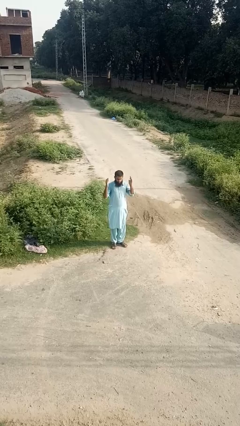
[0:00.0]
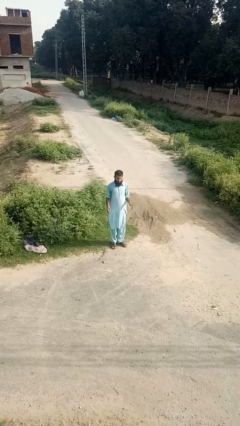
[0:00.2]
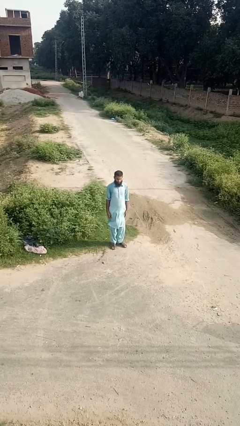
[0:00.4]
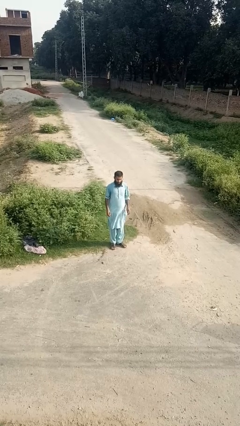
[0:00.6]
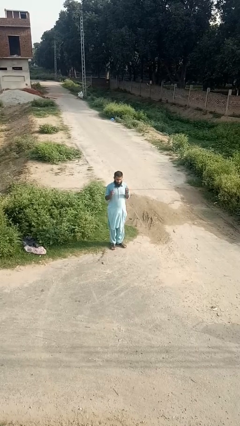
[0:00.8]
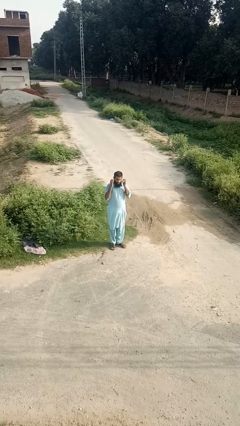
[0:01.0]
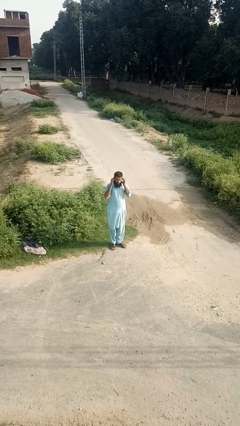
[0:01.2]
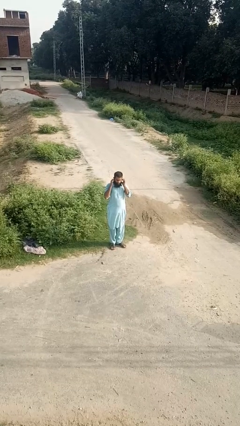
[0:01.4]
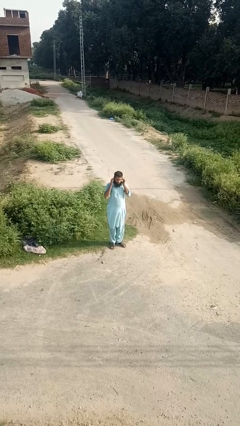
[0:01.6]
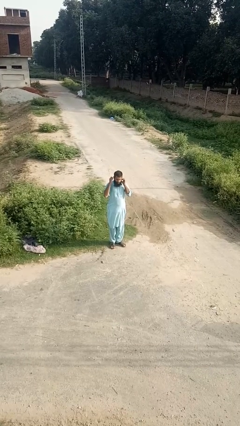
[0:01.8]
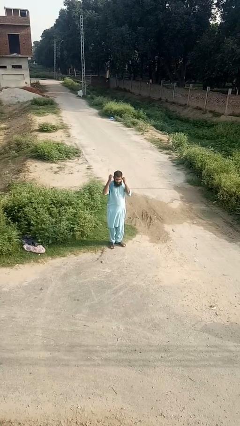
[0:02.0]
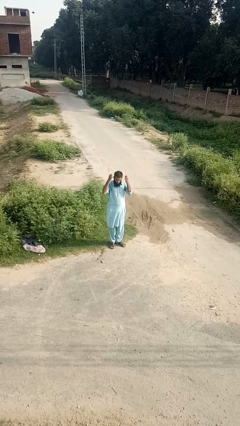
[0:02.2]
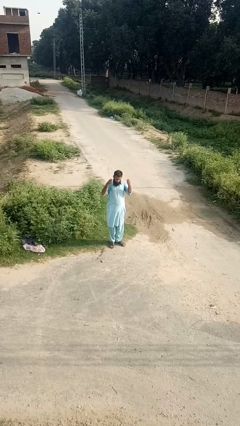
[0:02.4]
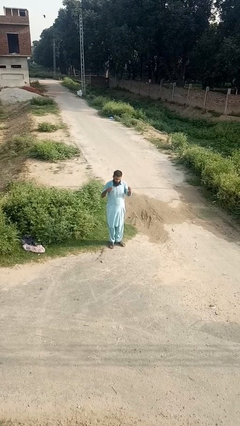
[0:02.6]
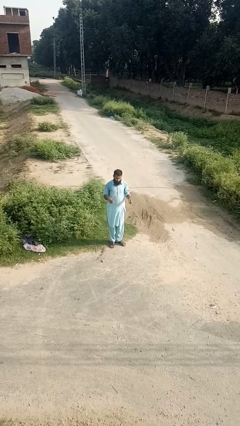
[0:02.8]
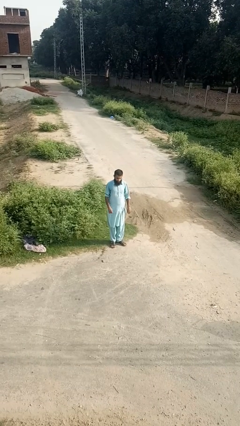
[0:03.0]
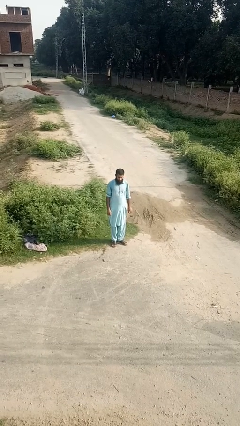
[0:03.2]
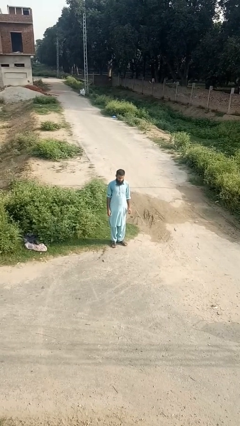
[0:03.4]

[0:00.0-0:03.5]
person takes off earrings

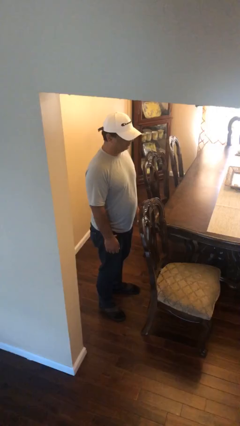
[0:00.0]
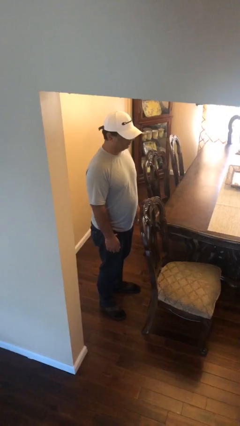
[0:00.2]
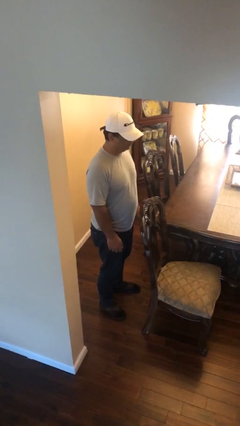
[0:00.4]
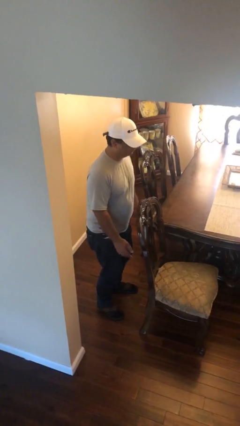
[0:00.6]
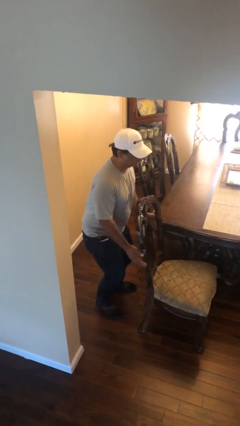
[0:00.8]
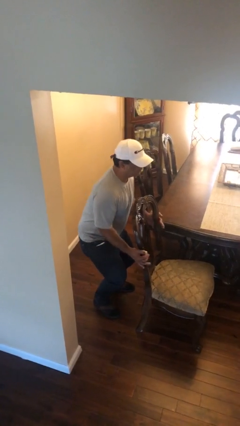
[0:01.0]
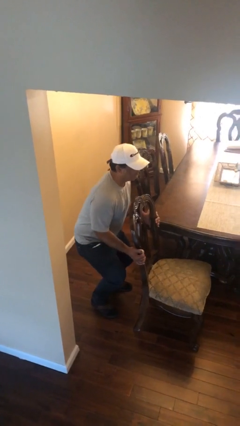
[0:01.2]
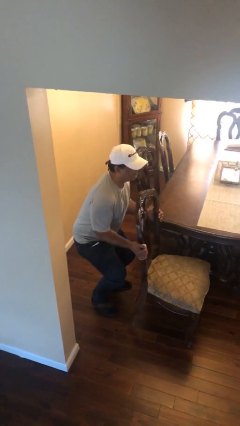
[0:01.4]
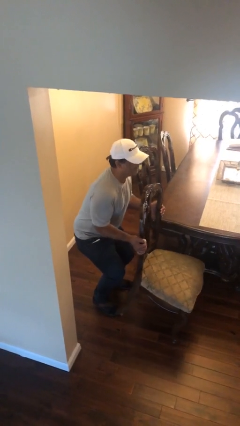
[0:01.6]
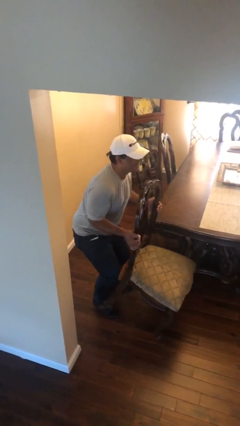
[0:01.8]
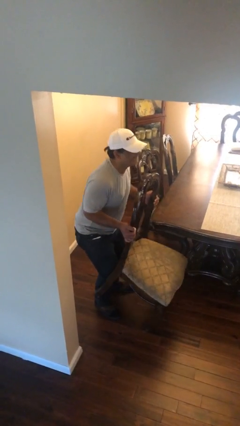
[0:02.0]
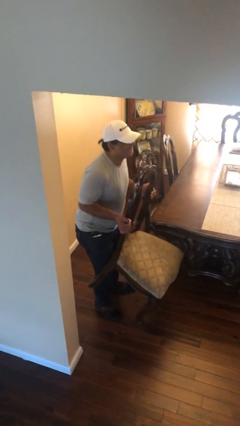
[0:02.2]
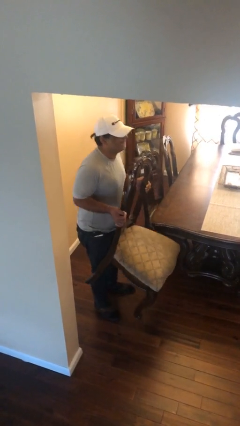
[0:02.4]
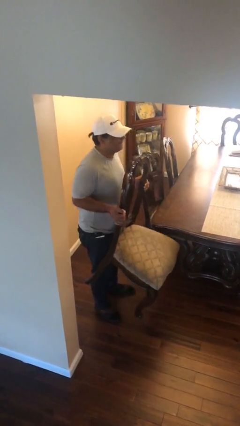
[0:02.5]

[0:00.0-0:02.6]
person picks up object from floor

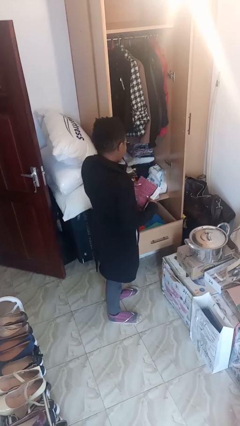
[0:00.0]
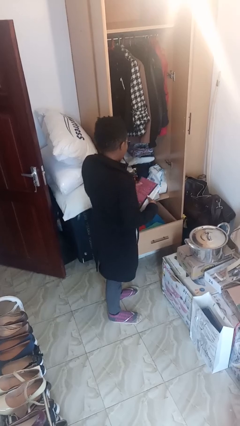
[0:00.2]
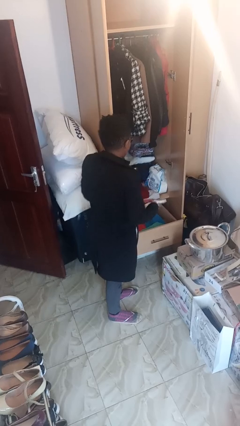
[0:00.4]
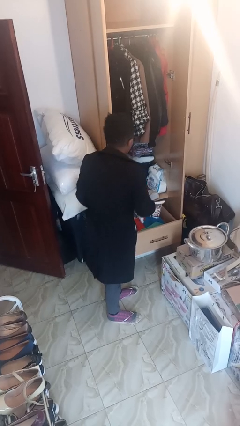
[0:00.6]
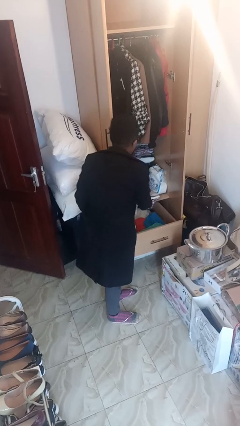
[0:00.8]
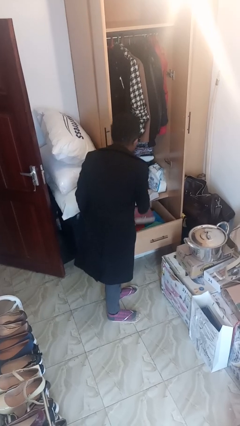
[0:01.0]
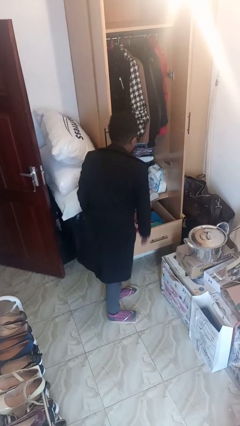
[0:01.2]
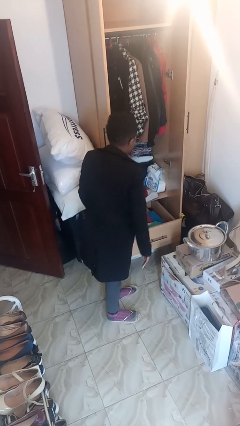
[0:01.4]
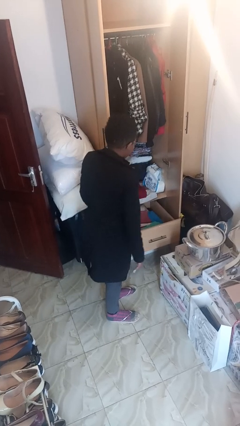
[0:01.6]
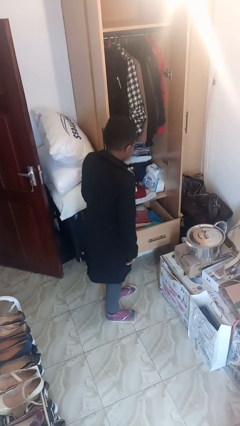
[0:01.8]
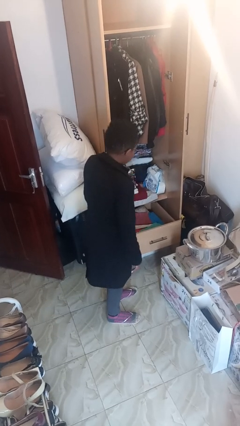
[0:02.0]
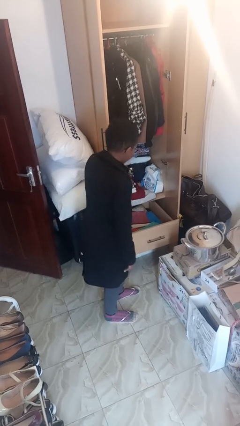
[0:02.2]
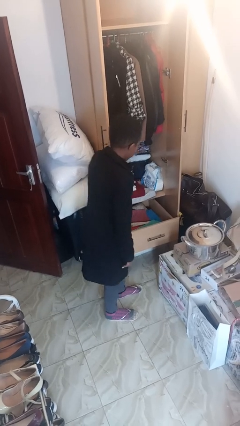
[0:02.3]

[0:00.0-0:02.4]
person puts clothes into dresser

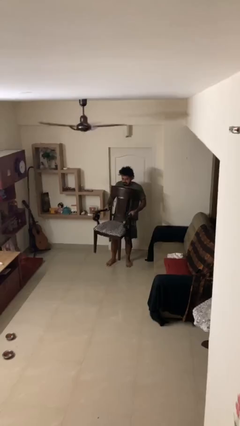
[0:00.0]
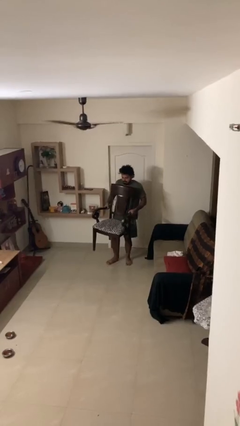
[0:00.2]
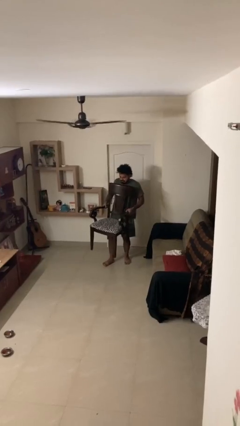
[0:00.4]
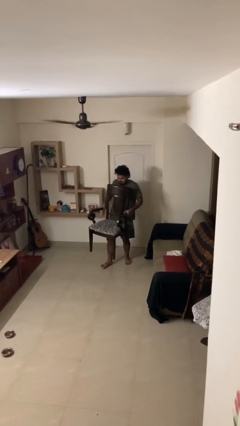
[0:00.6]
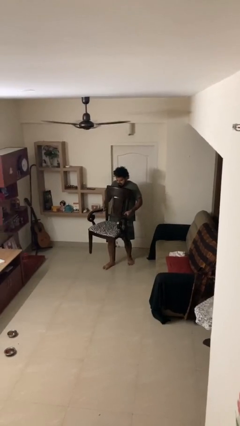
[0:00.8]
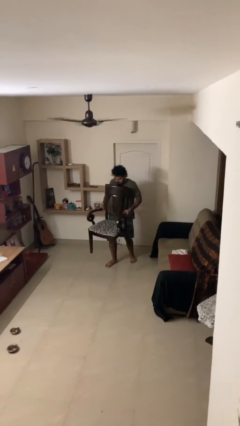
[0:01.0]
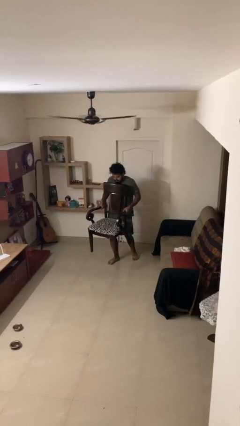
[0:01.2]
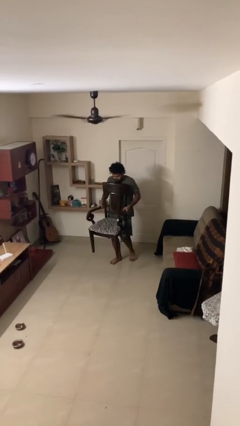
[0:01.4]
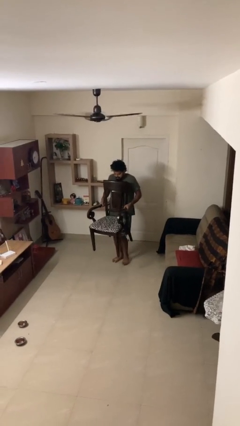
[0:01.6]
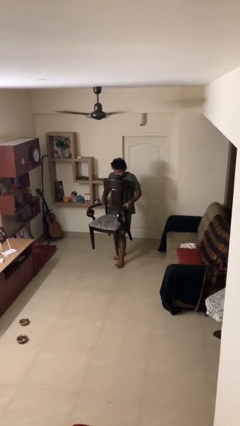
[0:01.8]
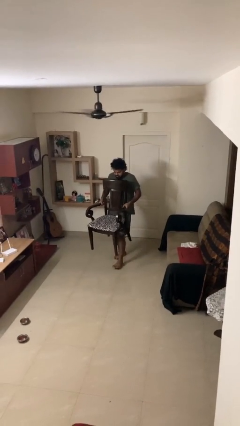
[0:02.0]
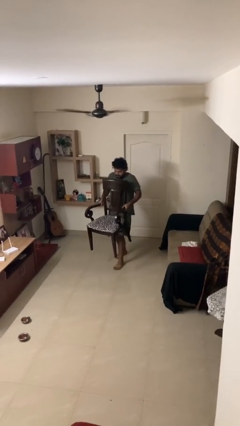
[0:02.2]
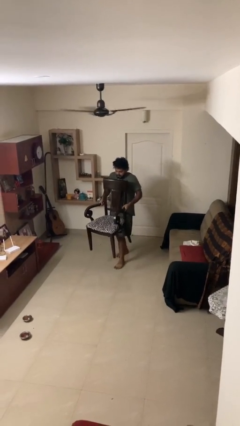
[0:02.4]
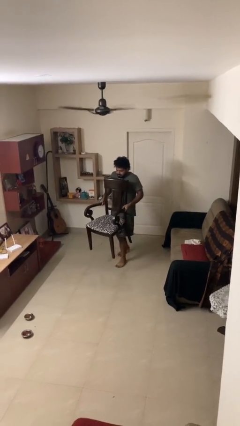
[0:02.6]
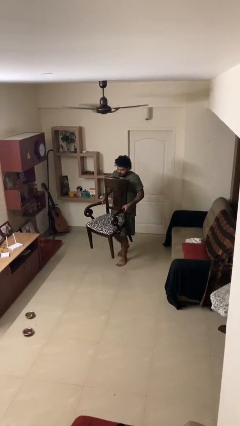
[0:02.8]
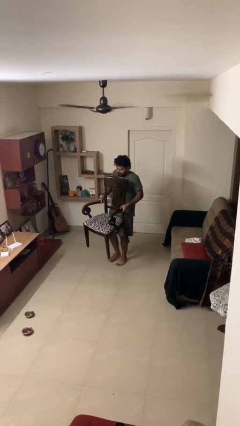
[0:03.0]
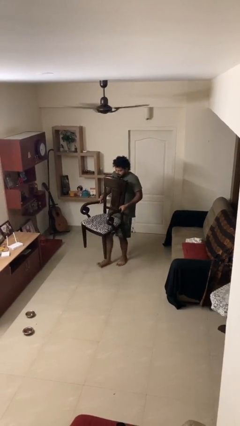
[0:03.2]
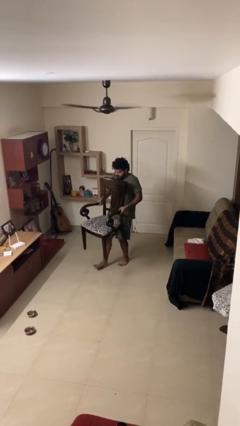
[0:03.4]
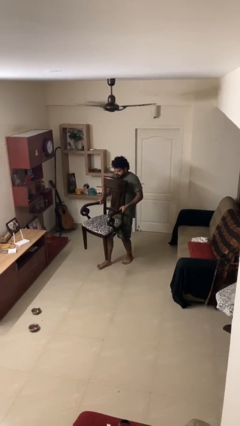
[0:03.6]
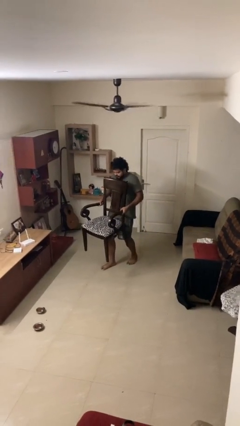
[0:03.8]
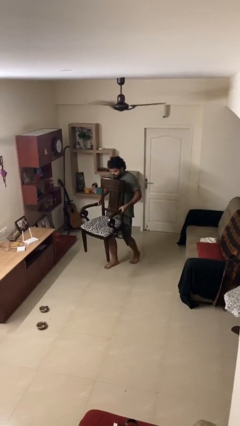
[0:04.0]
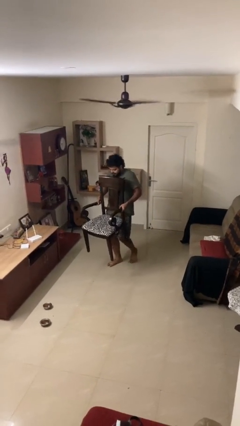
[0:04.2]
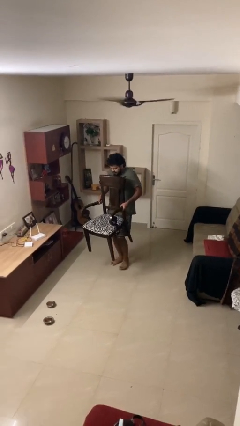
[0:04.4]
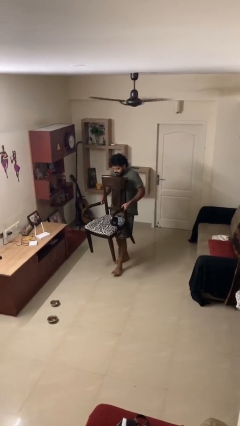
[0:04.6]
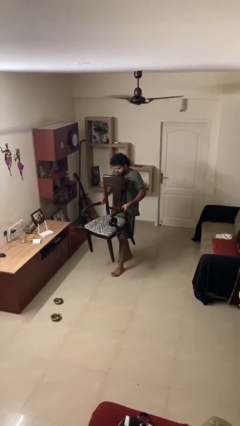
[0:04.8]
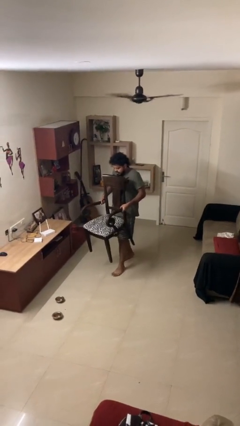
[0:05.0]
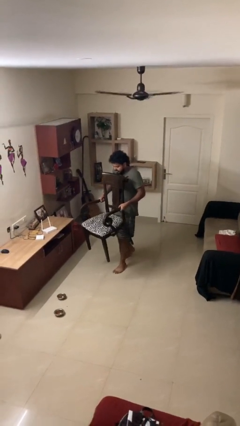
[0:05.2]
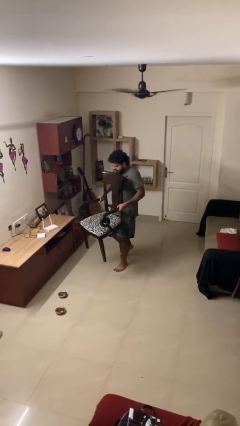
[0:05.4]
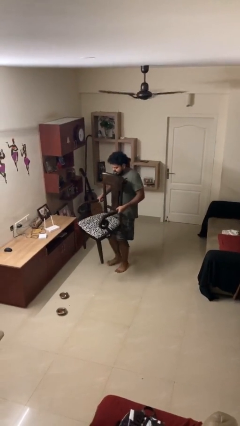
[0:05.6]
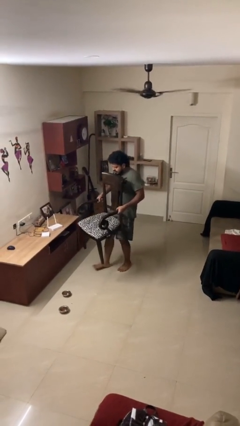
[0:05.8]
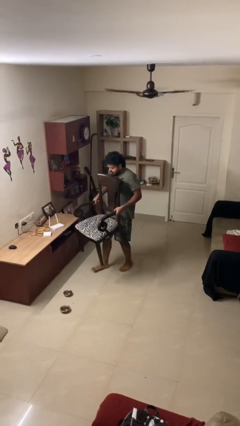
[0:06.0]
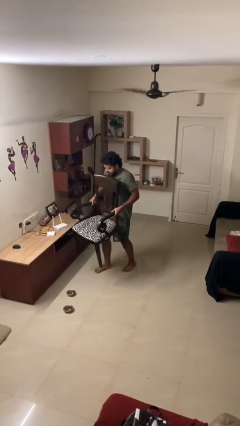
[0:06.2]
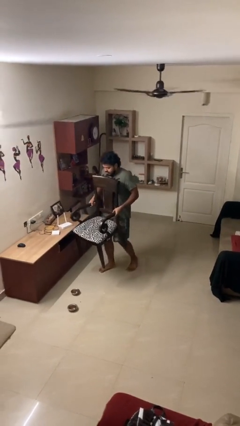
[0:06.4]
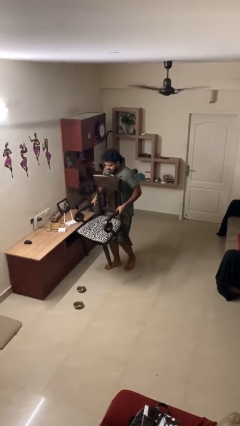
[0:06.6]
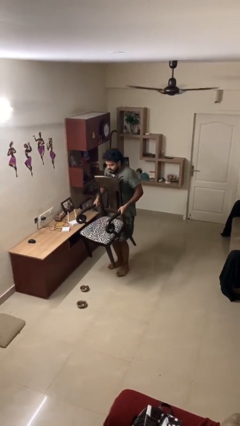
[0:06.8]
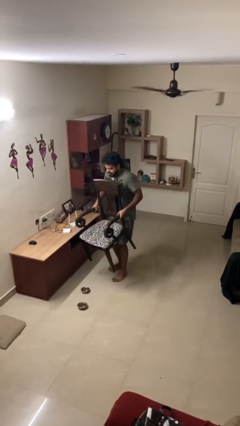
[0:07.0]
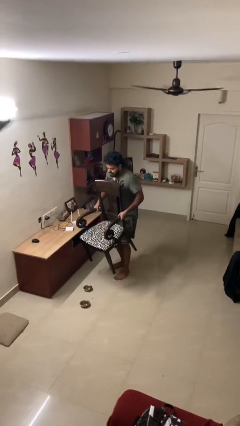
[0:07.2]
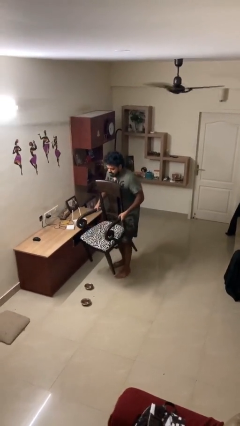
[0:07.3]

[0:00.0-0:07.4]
person carries heavy object

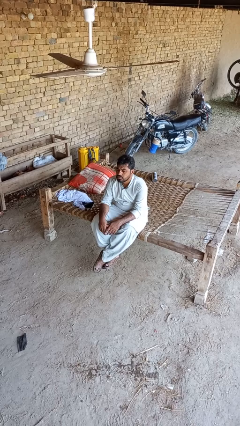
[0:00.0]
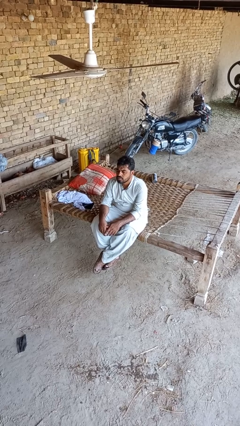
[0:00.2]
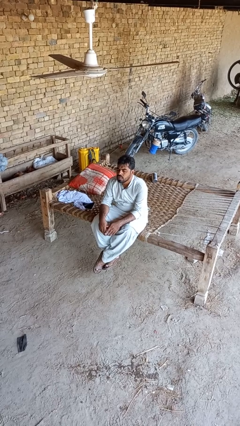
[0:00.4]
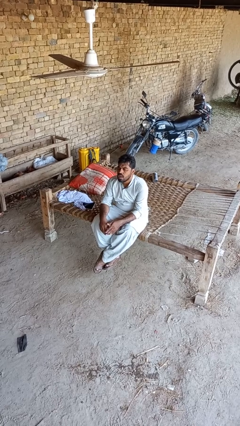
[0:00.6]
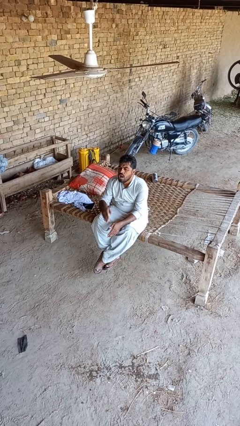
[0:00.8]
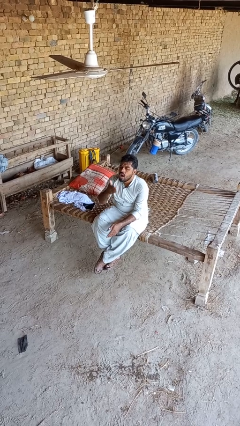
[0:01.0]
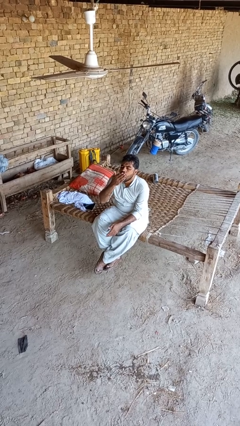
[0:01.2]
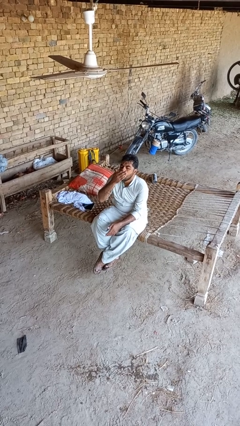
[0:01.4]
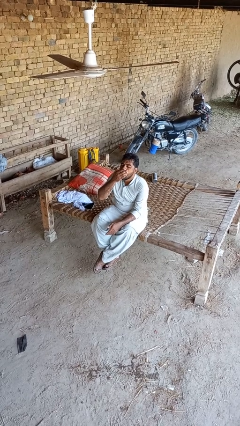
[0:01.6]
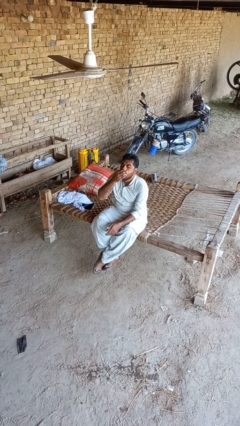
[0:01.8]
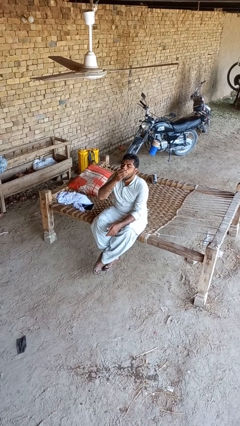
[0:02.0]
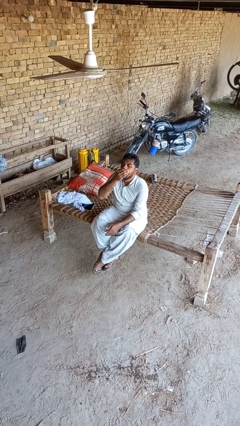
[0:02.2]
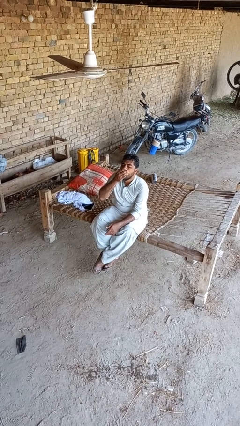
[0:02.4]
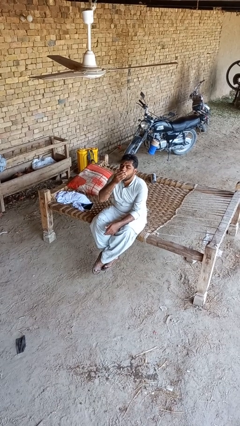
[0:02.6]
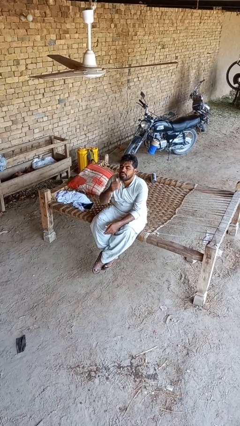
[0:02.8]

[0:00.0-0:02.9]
person yawns
